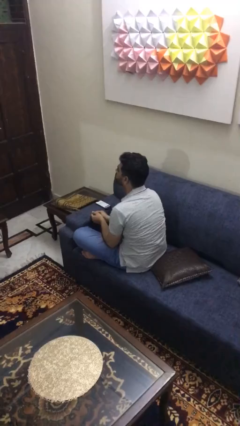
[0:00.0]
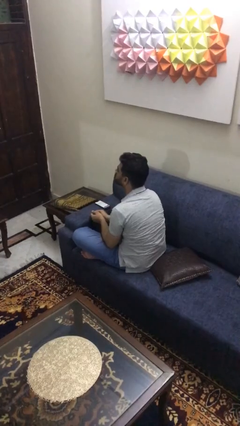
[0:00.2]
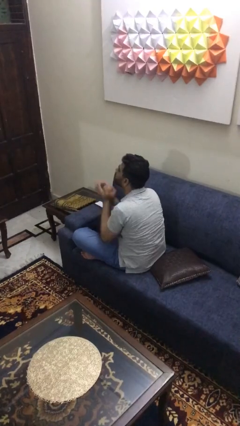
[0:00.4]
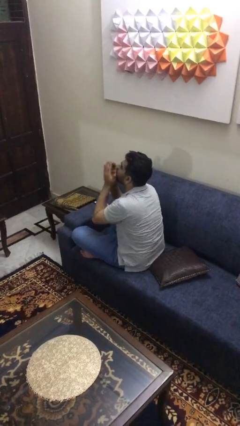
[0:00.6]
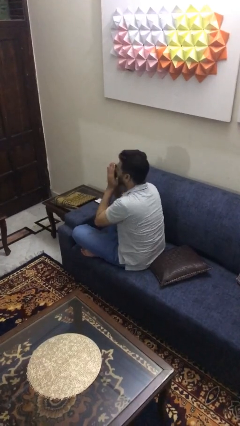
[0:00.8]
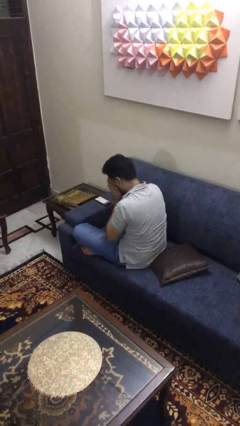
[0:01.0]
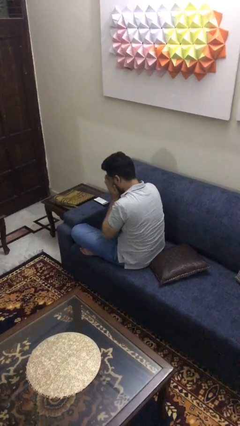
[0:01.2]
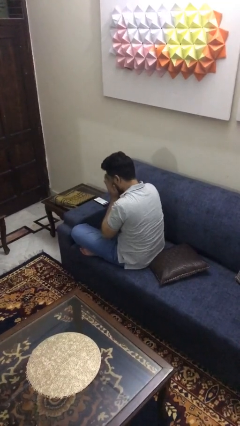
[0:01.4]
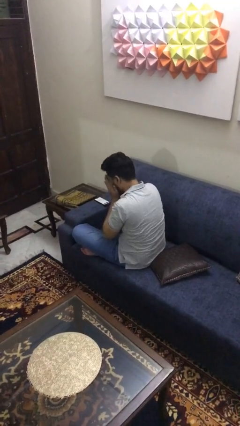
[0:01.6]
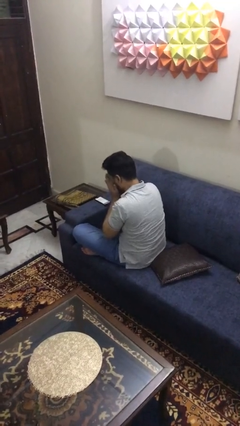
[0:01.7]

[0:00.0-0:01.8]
person sneezes into arm

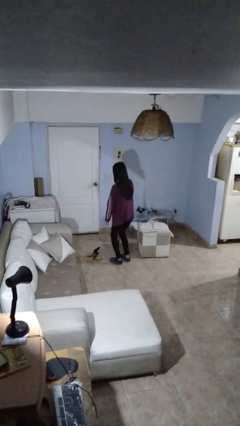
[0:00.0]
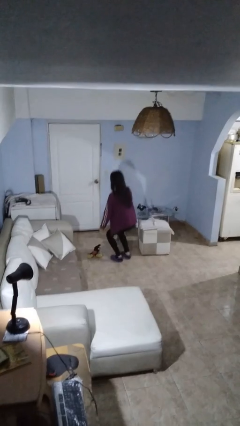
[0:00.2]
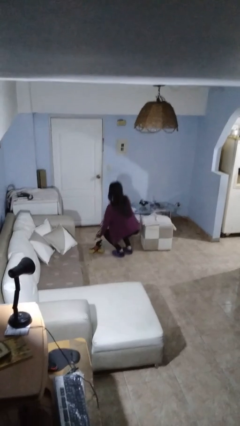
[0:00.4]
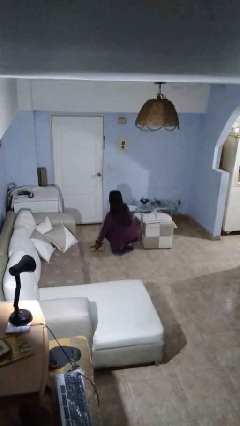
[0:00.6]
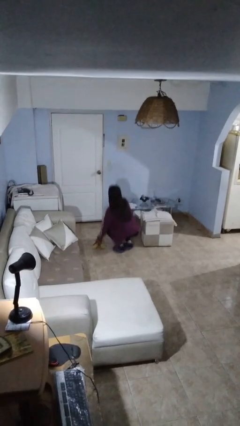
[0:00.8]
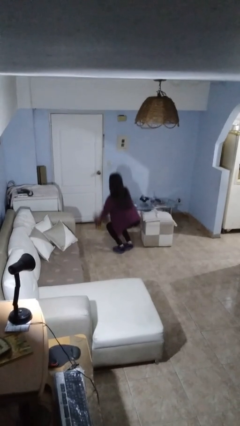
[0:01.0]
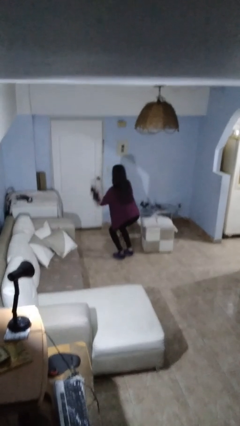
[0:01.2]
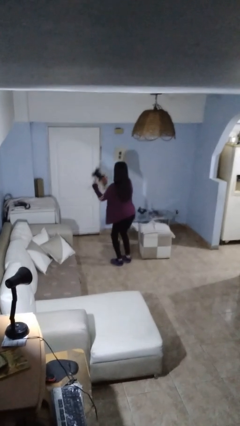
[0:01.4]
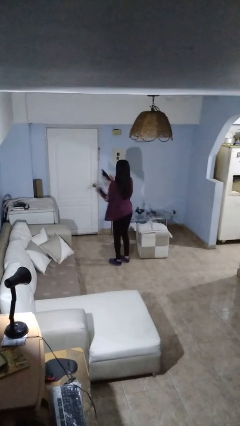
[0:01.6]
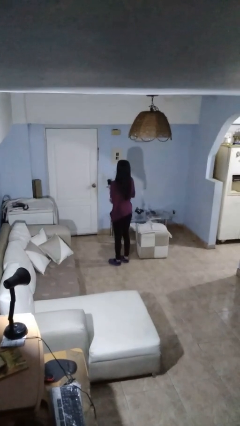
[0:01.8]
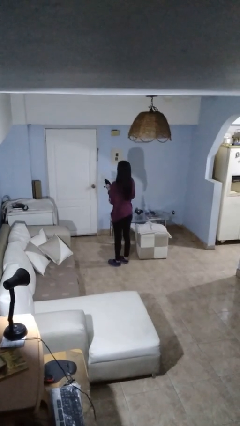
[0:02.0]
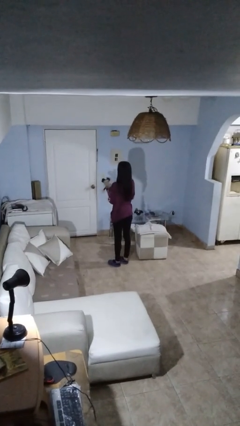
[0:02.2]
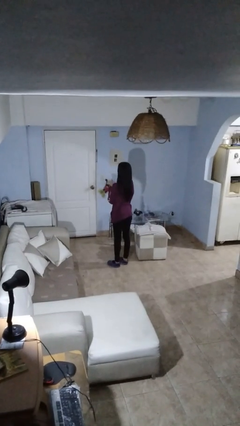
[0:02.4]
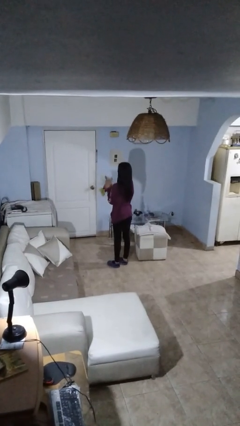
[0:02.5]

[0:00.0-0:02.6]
person picks up object from floor

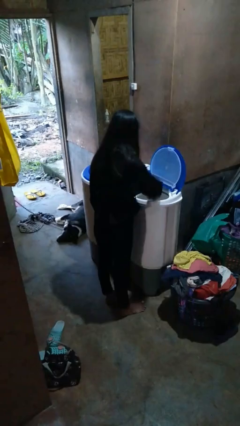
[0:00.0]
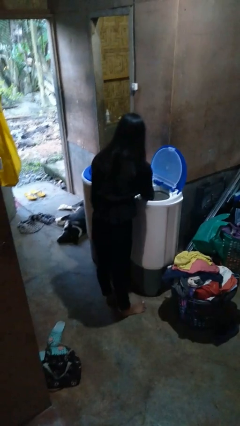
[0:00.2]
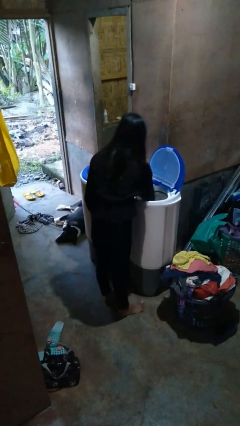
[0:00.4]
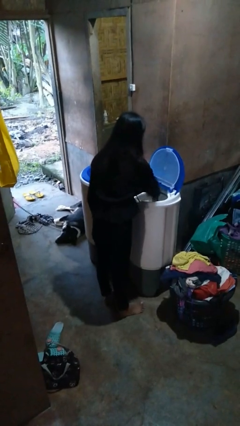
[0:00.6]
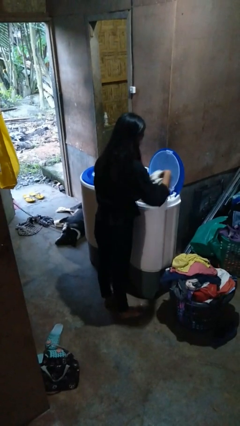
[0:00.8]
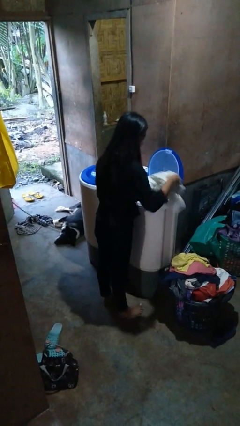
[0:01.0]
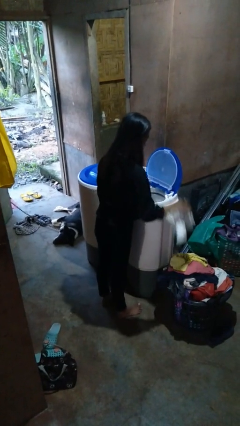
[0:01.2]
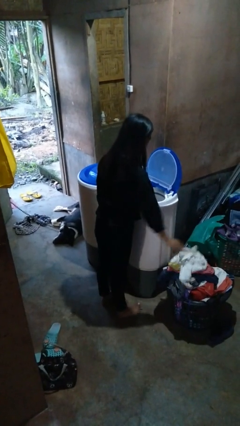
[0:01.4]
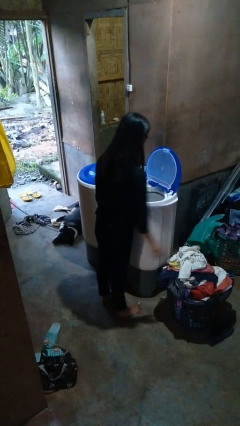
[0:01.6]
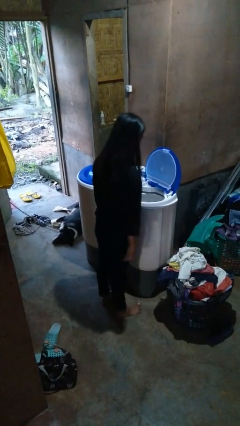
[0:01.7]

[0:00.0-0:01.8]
person unloads dryer

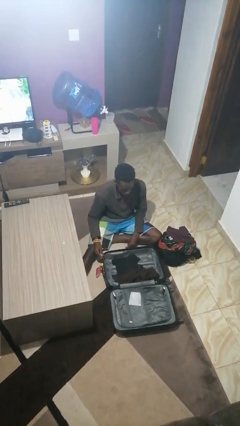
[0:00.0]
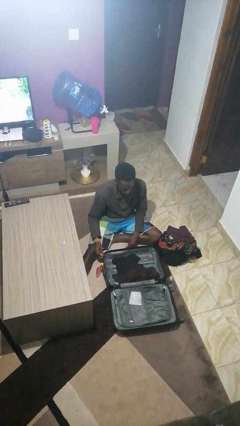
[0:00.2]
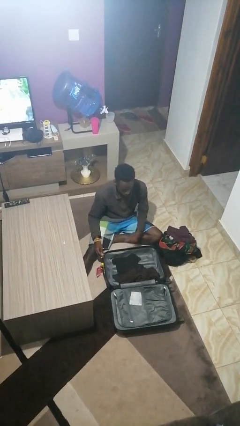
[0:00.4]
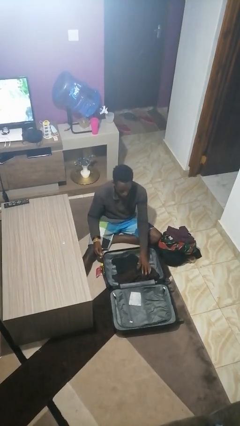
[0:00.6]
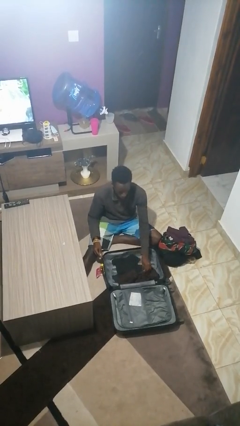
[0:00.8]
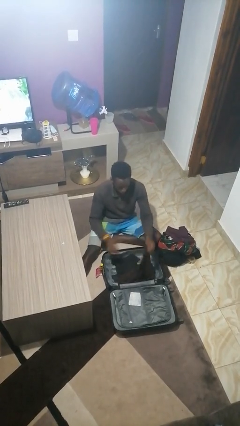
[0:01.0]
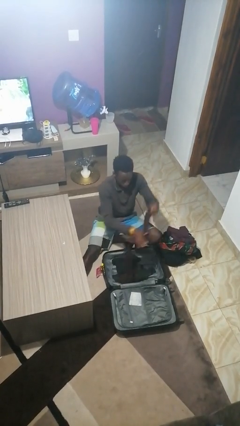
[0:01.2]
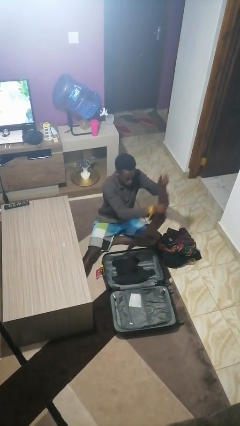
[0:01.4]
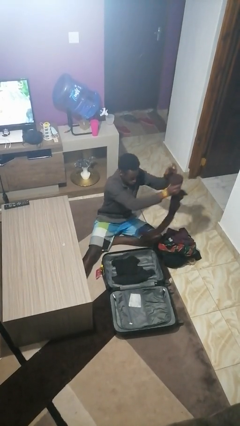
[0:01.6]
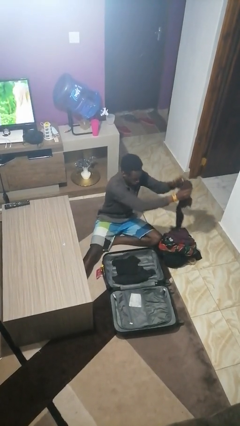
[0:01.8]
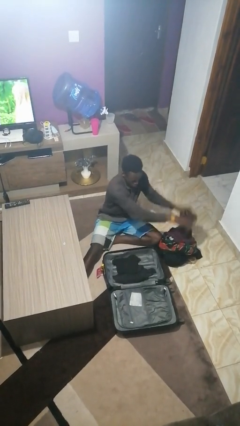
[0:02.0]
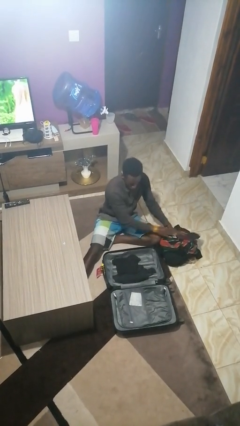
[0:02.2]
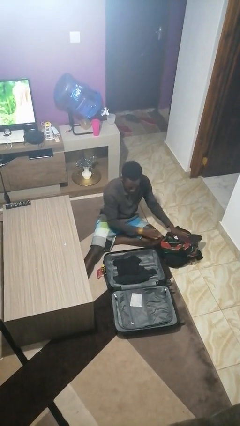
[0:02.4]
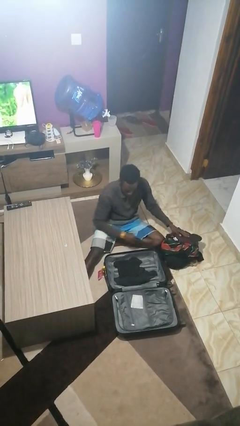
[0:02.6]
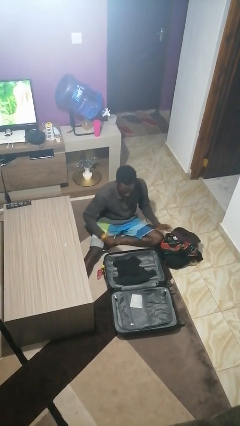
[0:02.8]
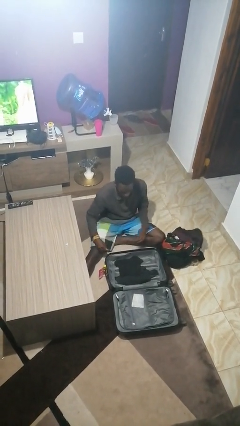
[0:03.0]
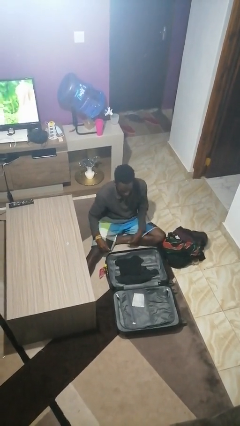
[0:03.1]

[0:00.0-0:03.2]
person unloads clothes from suitcase

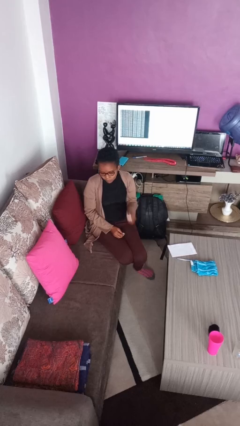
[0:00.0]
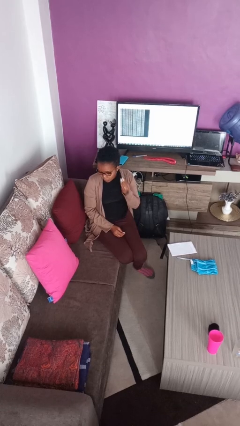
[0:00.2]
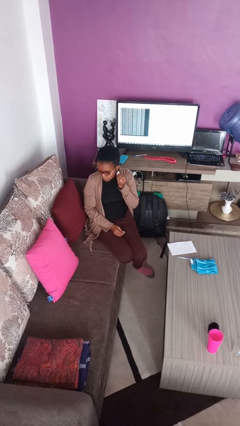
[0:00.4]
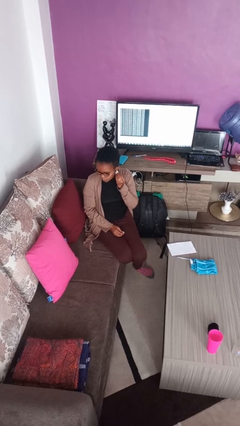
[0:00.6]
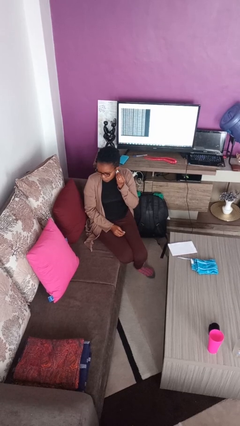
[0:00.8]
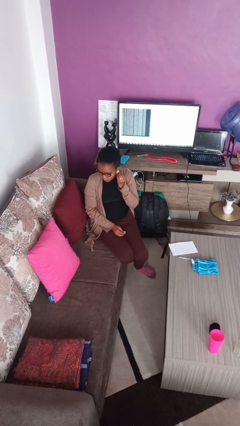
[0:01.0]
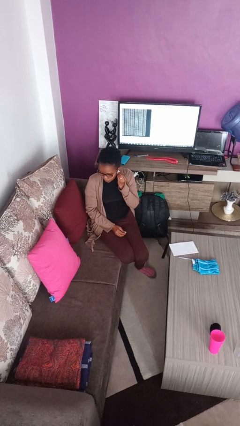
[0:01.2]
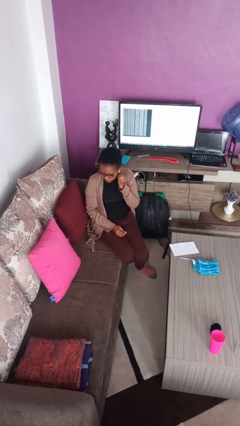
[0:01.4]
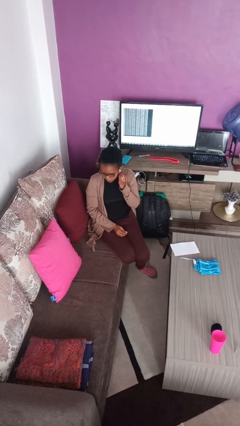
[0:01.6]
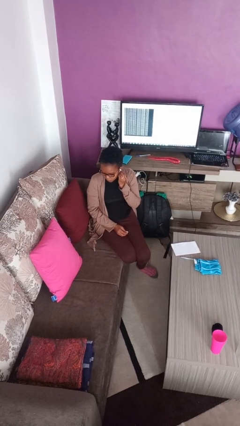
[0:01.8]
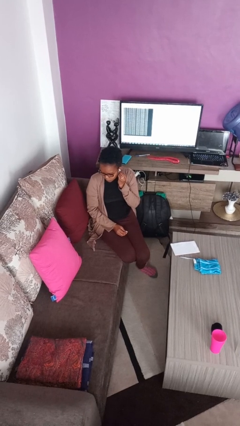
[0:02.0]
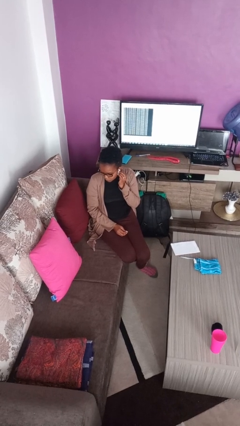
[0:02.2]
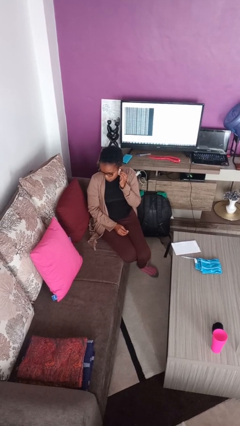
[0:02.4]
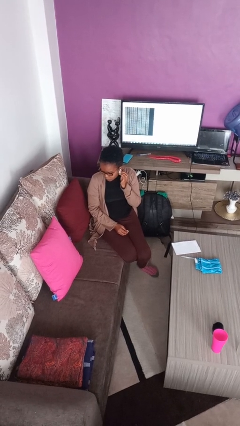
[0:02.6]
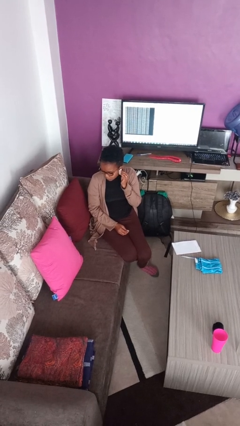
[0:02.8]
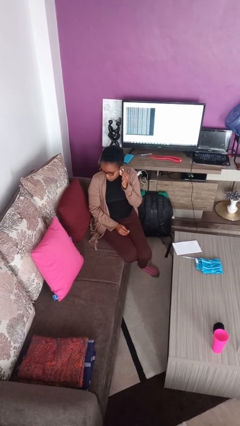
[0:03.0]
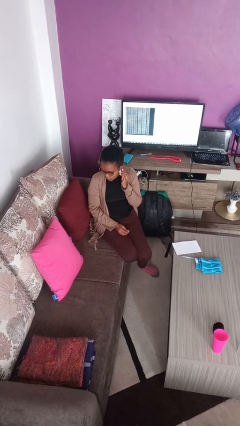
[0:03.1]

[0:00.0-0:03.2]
person puts on earrings

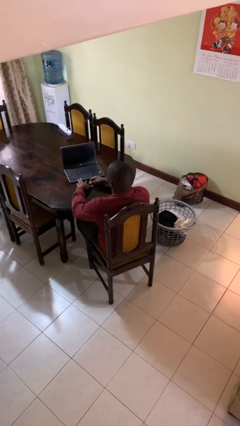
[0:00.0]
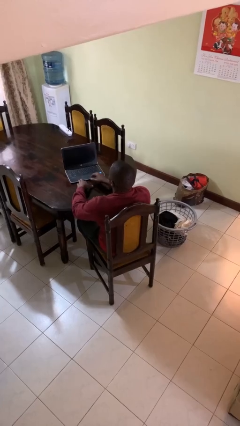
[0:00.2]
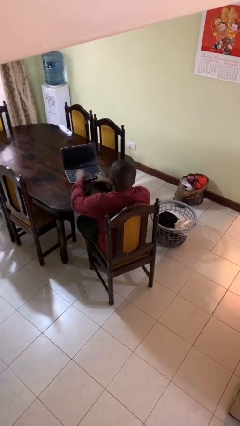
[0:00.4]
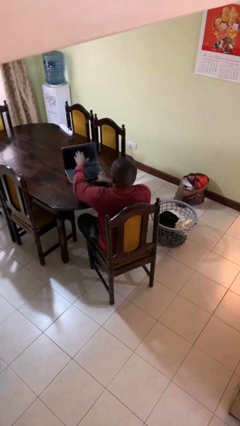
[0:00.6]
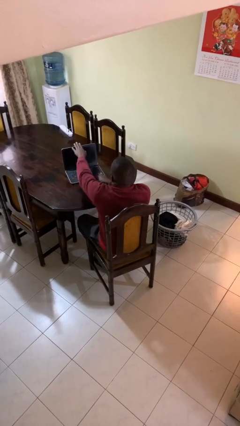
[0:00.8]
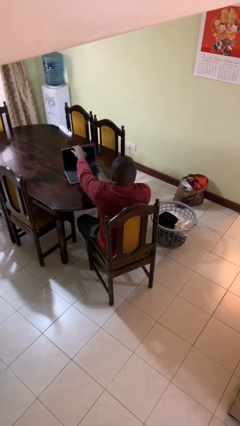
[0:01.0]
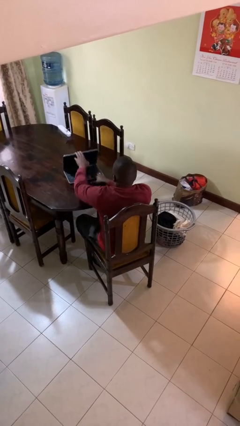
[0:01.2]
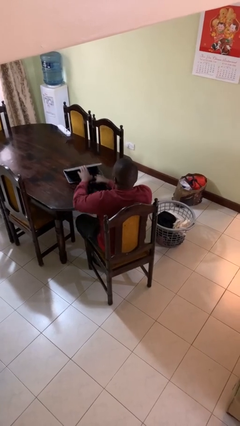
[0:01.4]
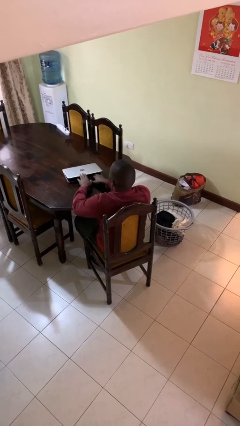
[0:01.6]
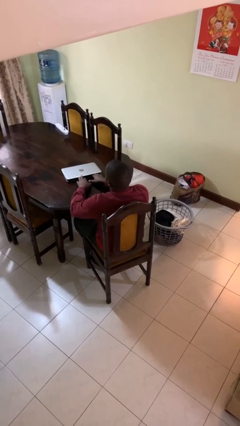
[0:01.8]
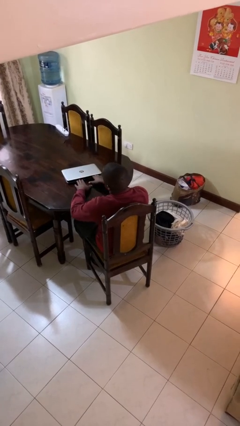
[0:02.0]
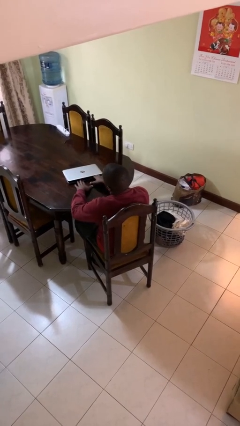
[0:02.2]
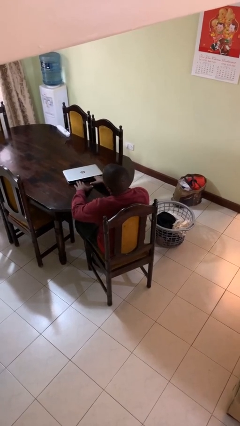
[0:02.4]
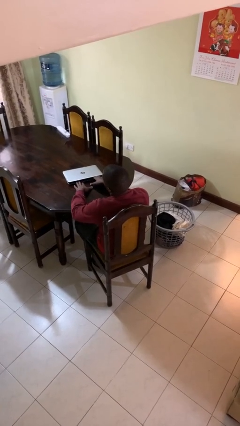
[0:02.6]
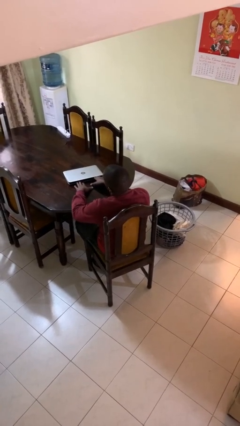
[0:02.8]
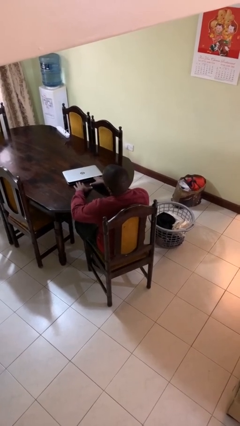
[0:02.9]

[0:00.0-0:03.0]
person closes laptop

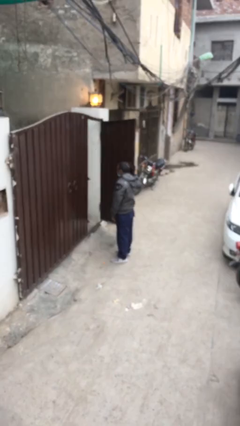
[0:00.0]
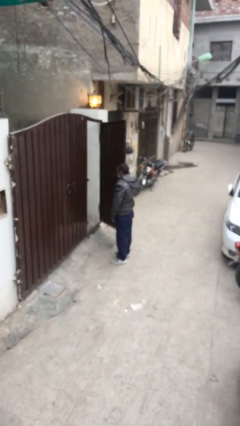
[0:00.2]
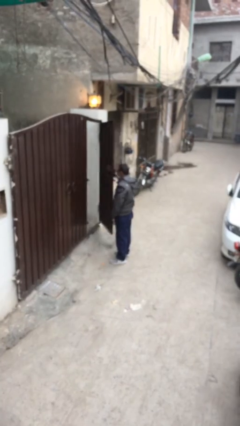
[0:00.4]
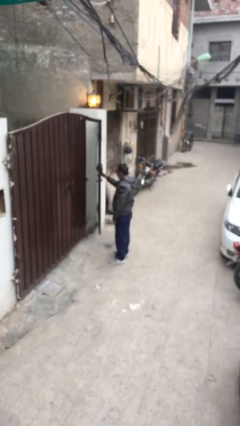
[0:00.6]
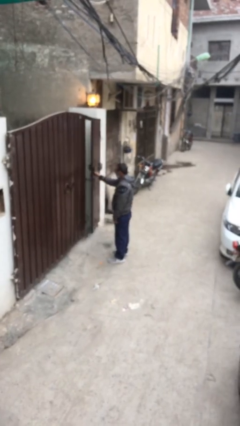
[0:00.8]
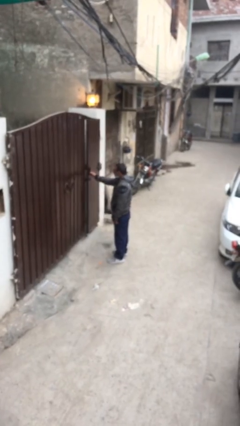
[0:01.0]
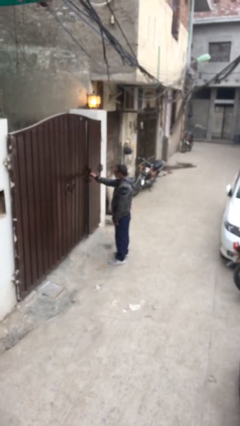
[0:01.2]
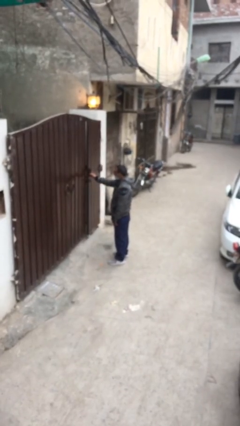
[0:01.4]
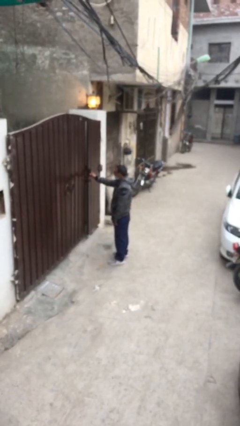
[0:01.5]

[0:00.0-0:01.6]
person closes facility door
